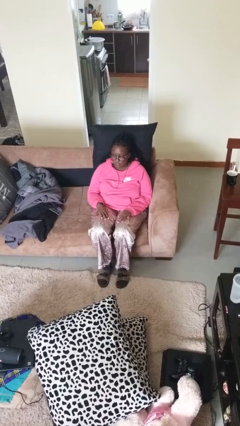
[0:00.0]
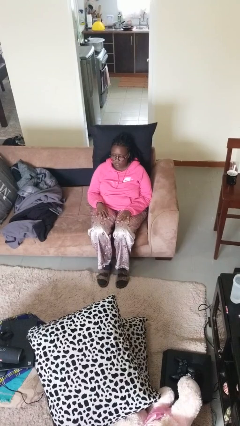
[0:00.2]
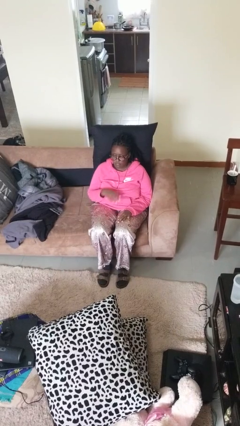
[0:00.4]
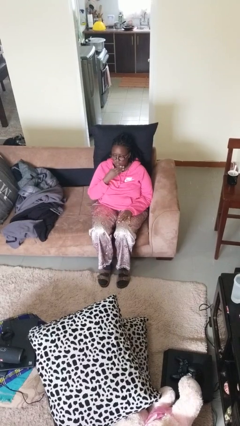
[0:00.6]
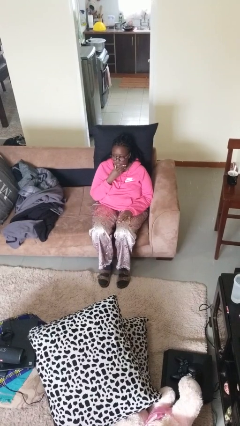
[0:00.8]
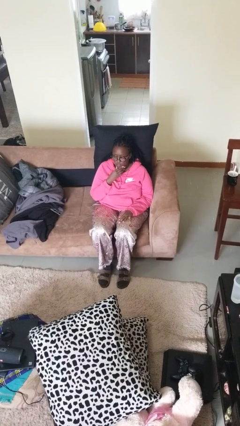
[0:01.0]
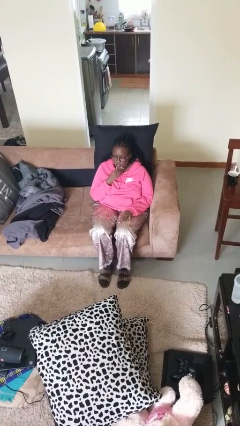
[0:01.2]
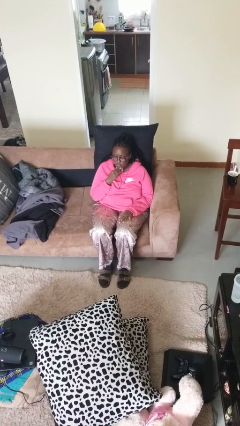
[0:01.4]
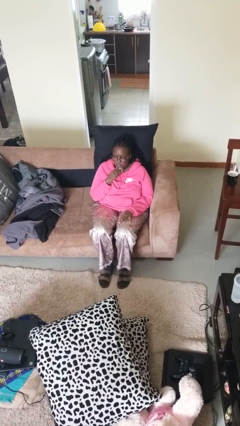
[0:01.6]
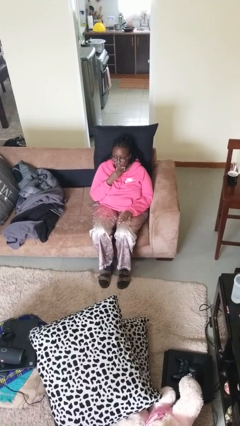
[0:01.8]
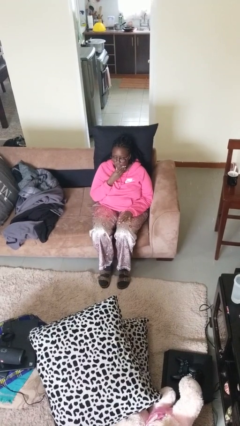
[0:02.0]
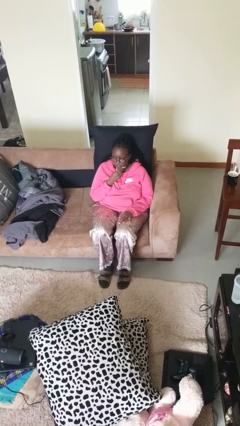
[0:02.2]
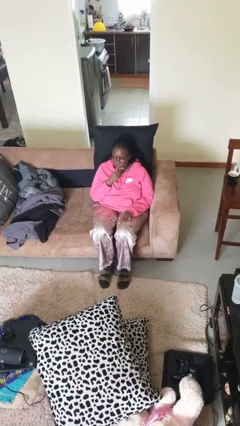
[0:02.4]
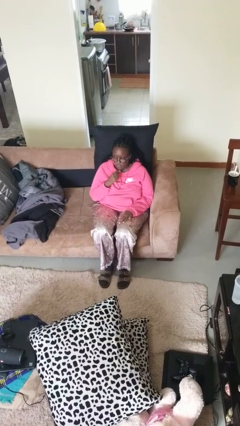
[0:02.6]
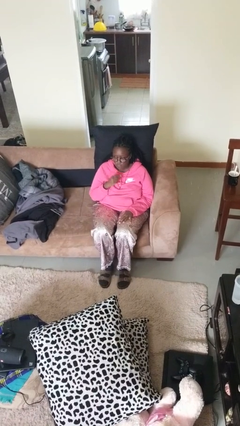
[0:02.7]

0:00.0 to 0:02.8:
person strokes chin

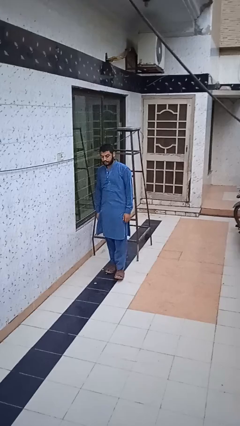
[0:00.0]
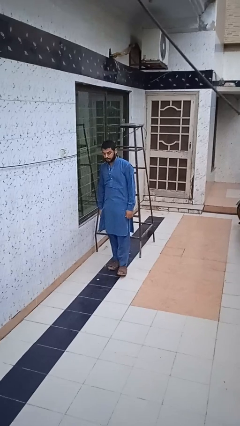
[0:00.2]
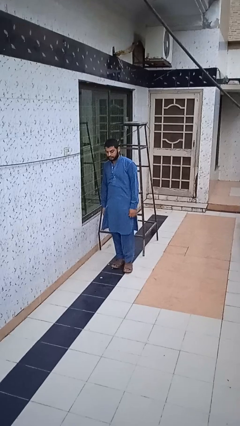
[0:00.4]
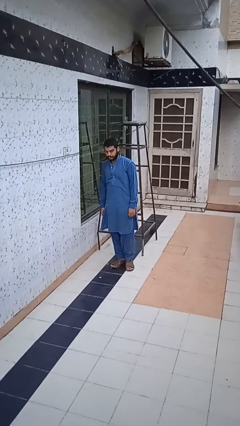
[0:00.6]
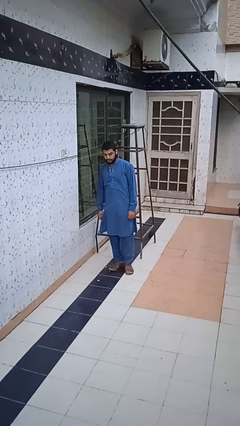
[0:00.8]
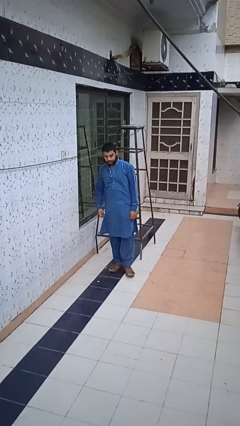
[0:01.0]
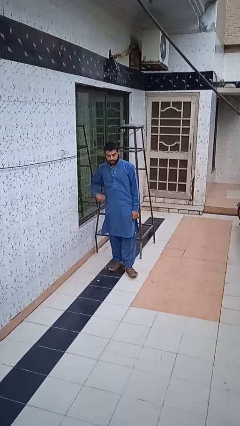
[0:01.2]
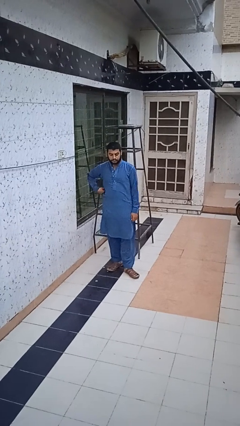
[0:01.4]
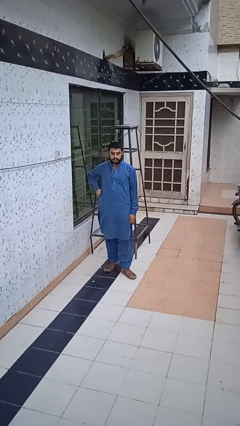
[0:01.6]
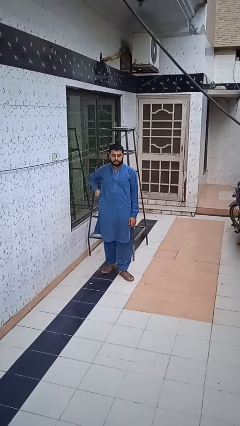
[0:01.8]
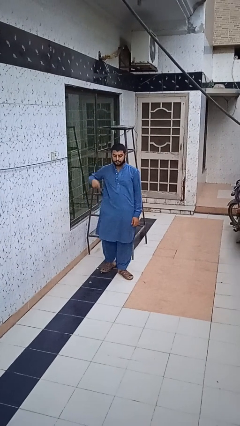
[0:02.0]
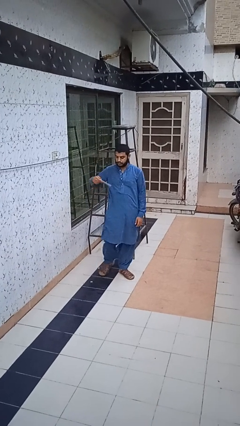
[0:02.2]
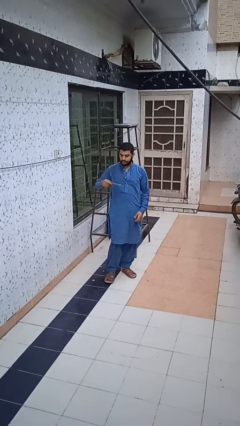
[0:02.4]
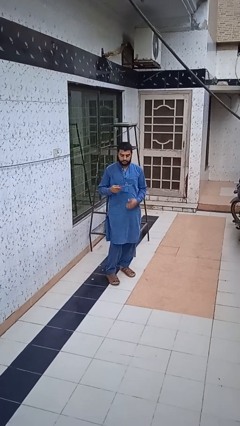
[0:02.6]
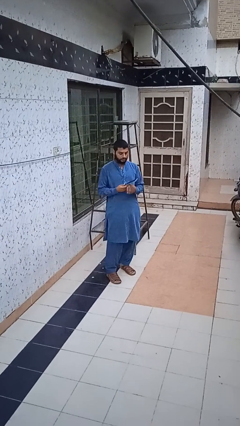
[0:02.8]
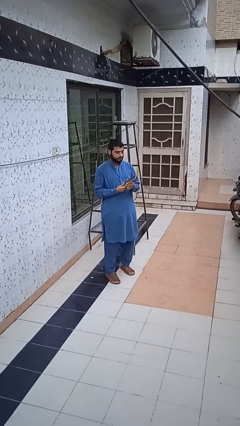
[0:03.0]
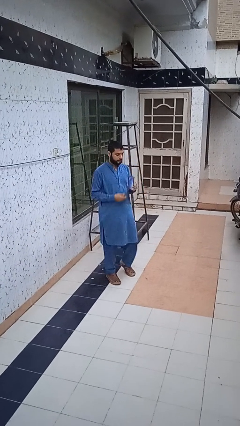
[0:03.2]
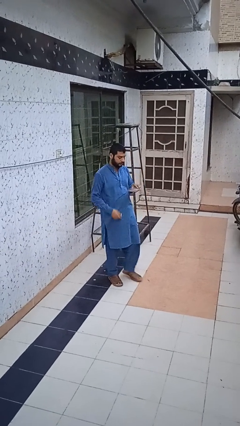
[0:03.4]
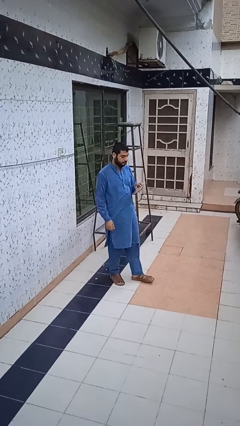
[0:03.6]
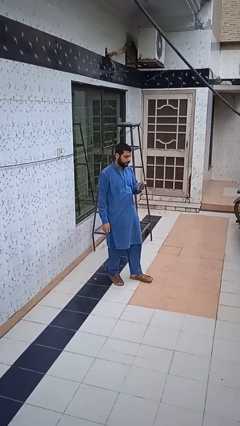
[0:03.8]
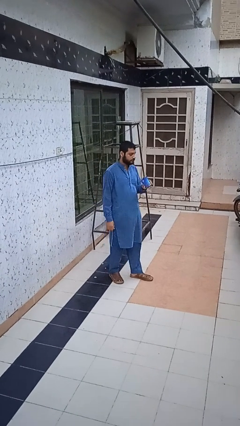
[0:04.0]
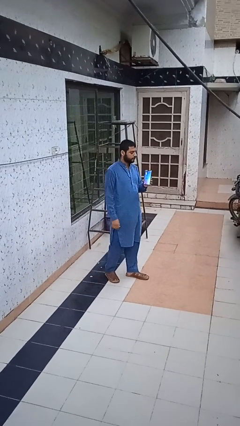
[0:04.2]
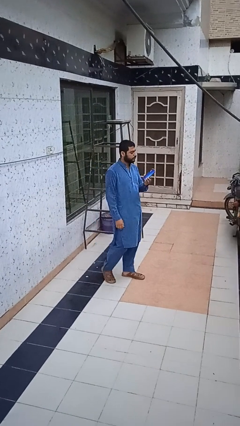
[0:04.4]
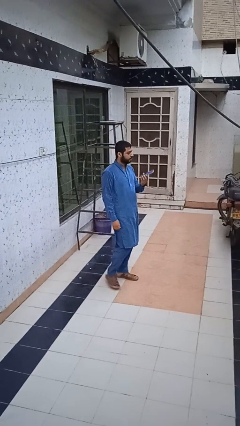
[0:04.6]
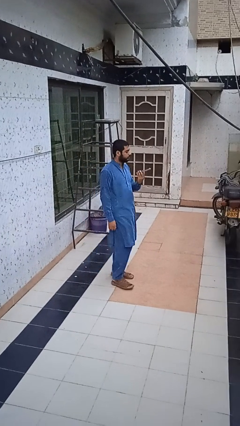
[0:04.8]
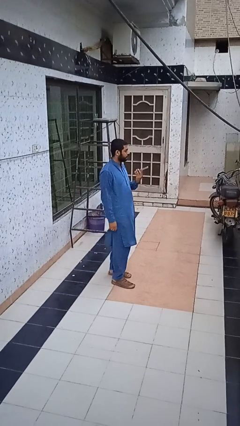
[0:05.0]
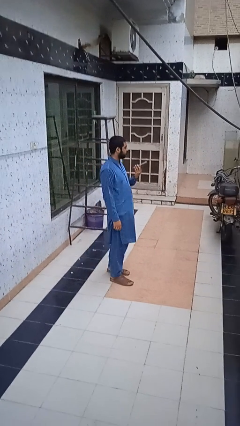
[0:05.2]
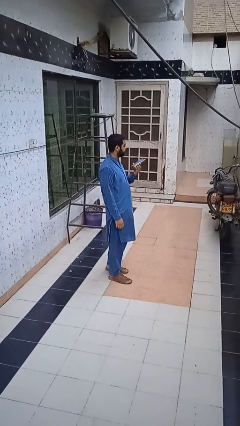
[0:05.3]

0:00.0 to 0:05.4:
person takes phone from pocket

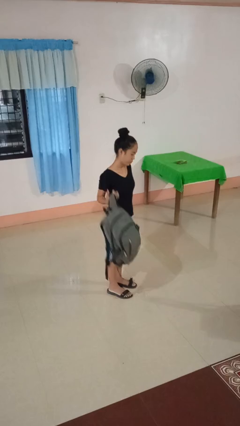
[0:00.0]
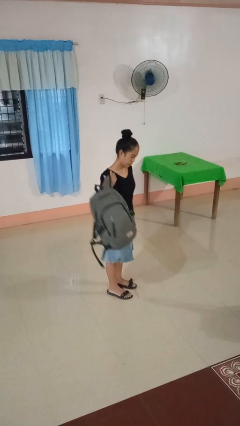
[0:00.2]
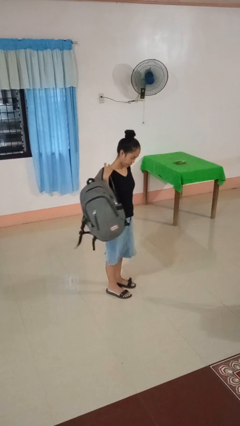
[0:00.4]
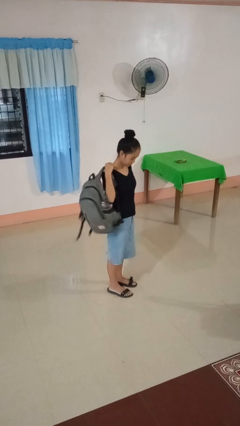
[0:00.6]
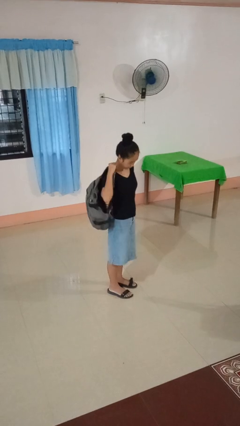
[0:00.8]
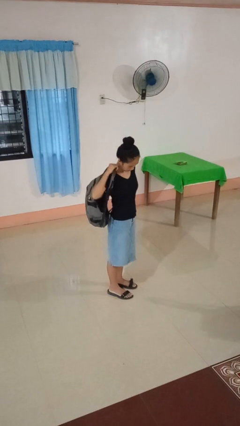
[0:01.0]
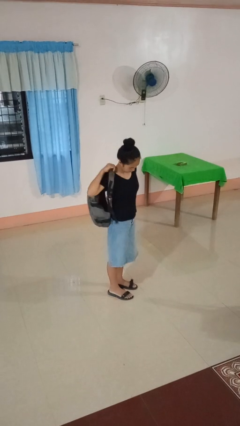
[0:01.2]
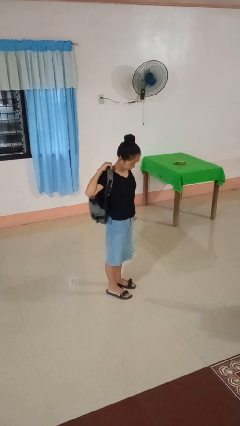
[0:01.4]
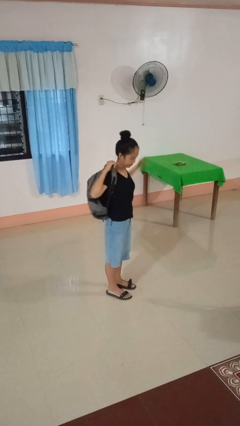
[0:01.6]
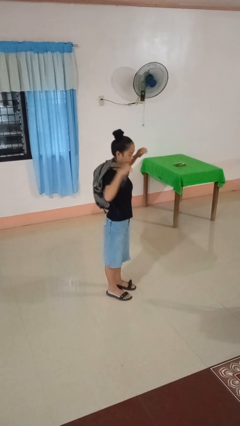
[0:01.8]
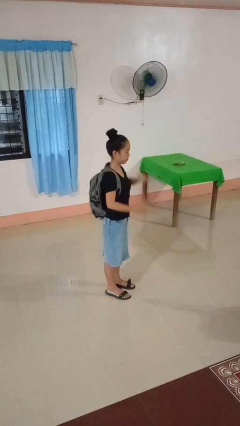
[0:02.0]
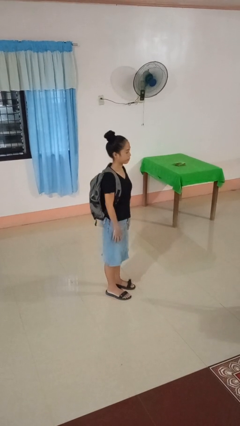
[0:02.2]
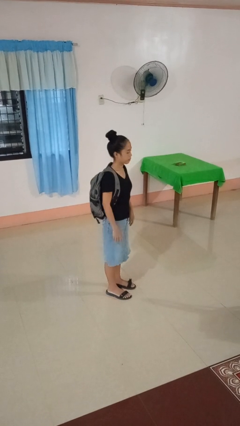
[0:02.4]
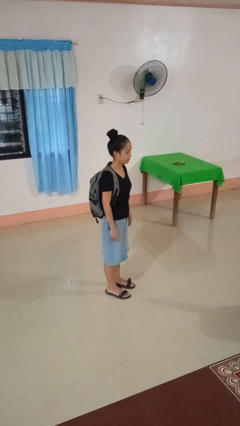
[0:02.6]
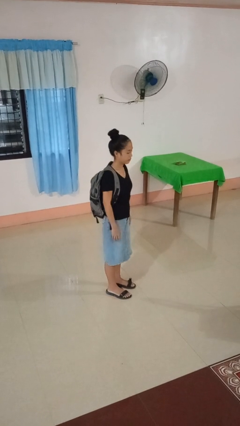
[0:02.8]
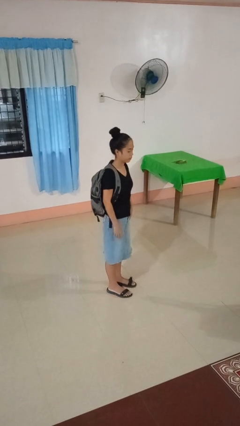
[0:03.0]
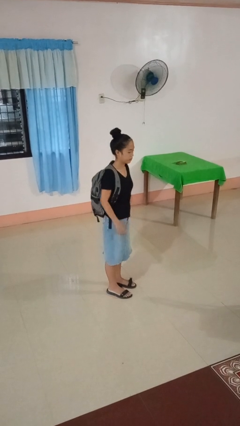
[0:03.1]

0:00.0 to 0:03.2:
person puts on backpack

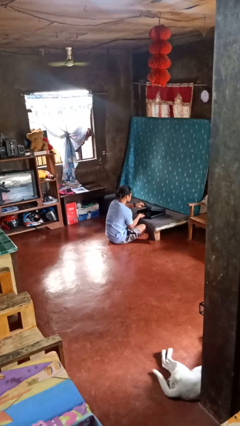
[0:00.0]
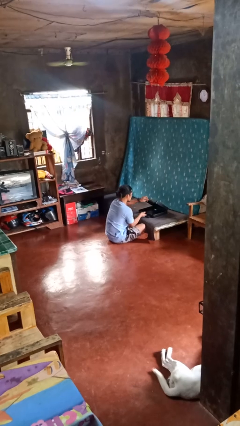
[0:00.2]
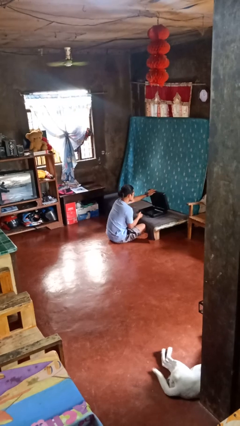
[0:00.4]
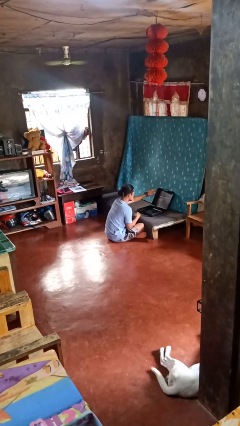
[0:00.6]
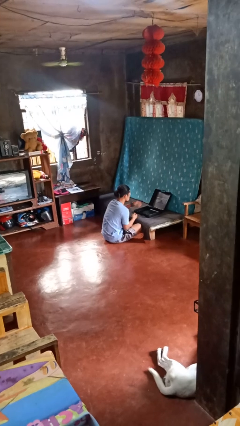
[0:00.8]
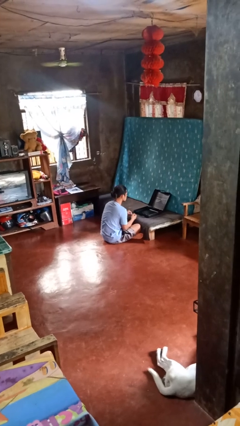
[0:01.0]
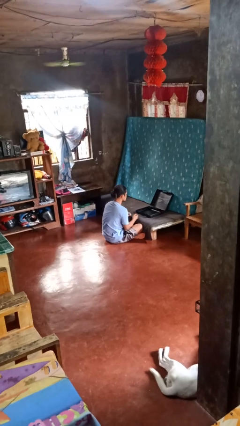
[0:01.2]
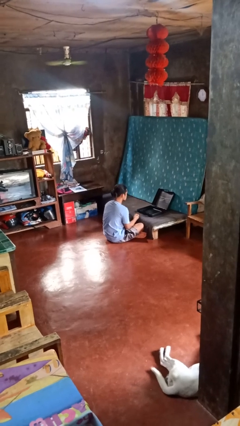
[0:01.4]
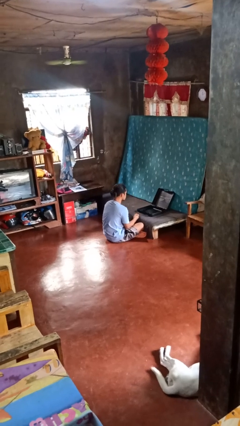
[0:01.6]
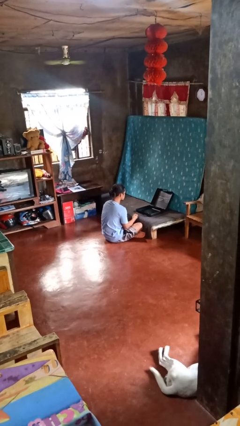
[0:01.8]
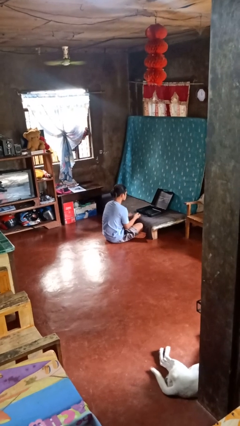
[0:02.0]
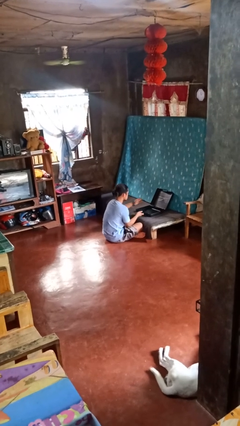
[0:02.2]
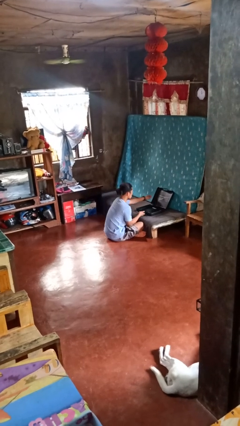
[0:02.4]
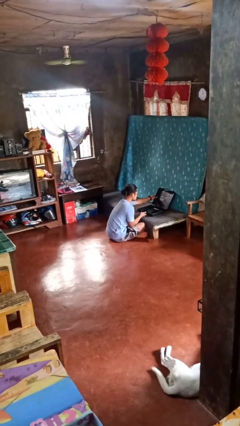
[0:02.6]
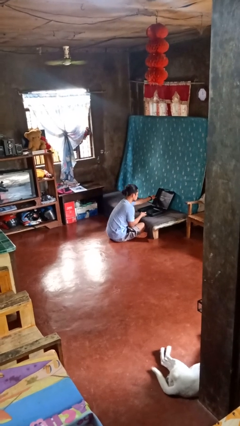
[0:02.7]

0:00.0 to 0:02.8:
person opens suitcase

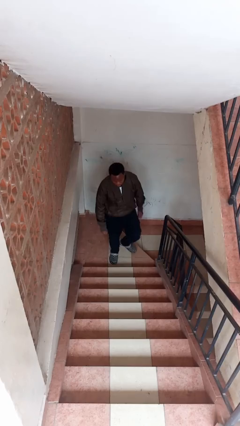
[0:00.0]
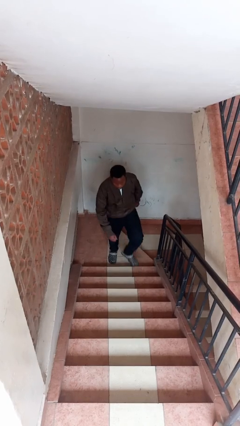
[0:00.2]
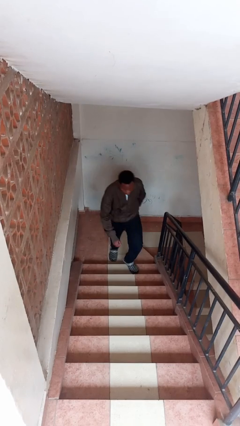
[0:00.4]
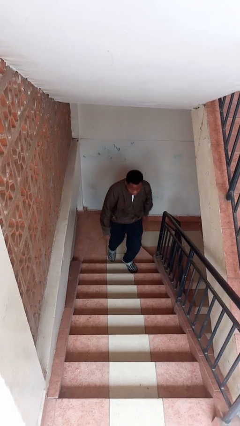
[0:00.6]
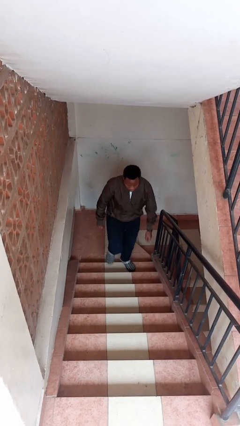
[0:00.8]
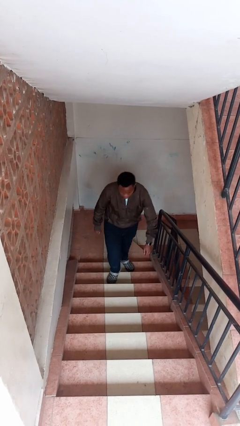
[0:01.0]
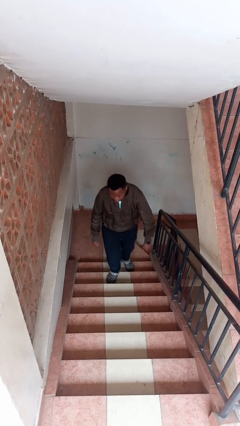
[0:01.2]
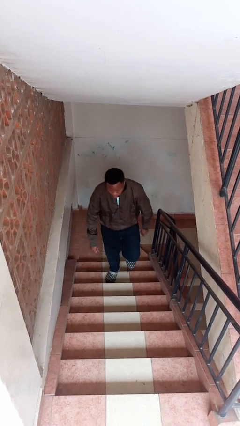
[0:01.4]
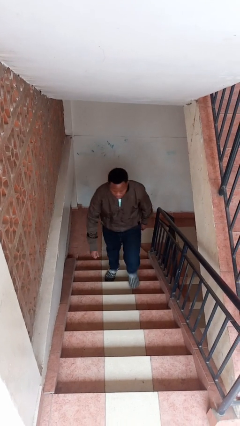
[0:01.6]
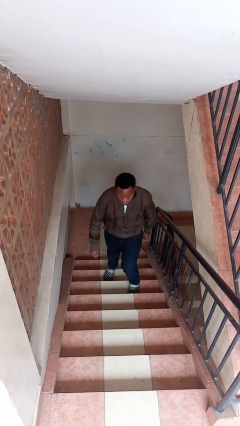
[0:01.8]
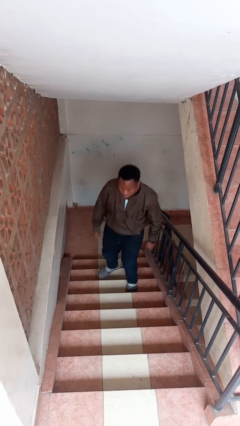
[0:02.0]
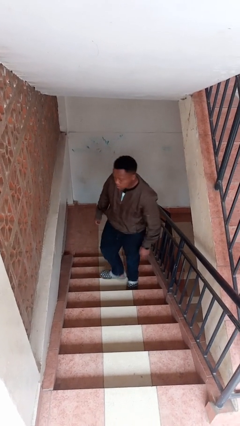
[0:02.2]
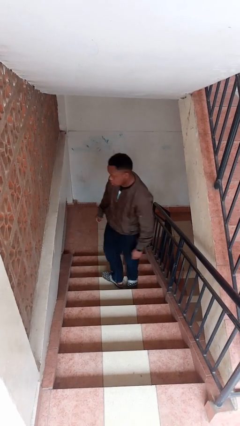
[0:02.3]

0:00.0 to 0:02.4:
person climbs up stairs

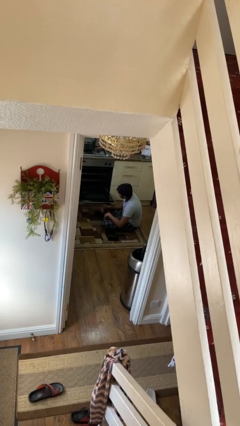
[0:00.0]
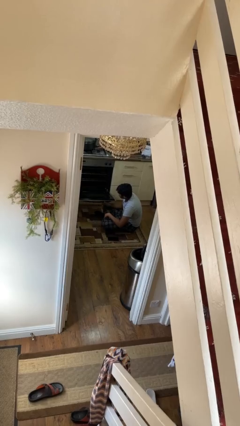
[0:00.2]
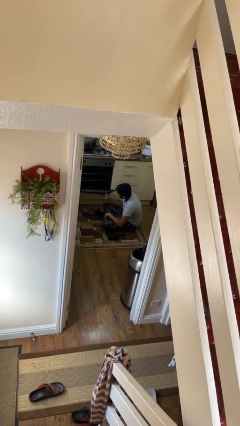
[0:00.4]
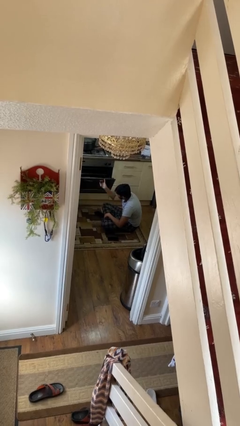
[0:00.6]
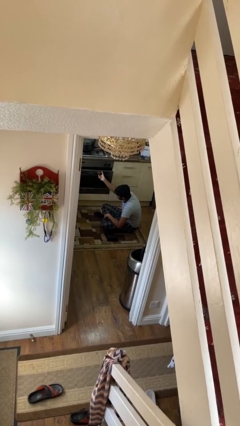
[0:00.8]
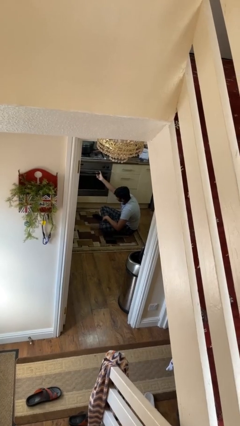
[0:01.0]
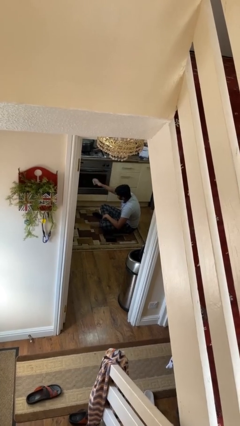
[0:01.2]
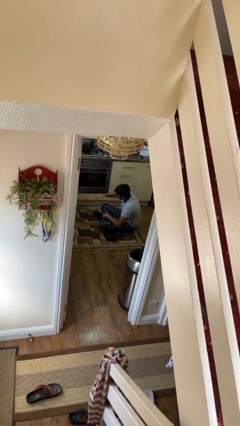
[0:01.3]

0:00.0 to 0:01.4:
person closes oven door
